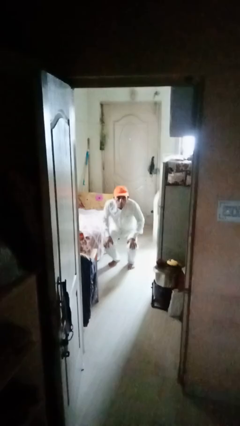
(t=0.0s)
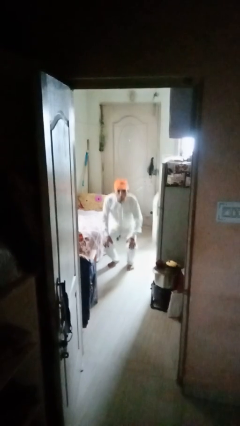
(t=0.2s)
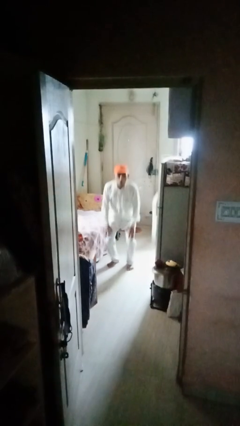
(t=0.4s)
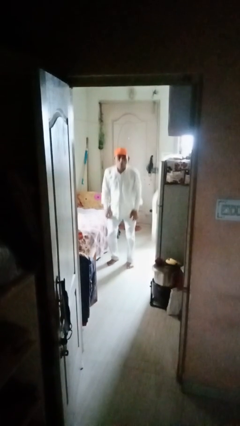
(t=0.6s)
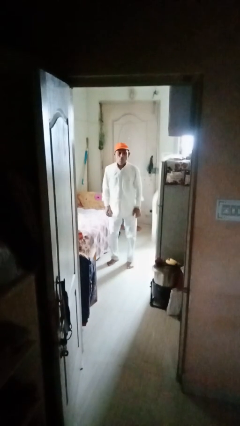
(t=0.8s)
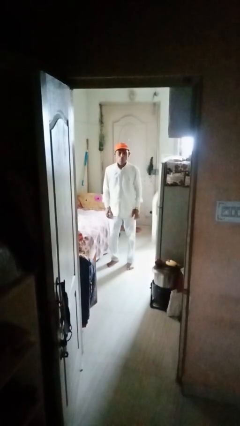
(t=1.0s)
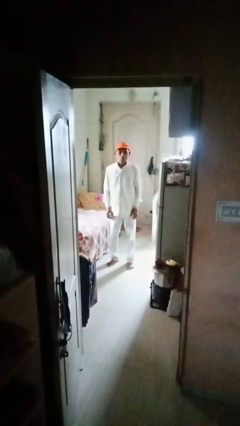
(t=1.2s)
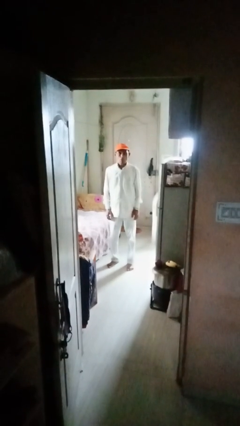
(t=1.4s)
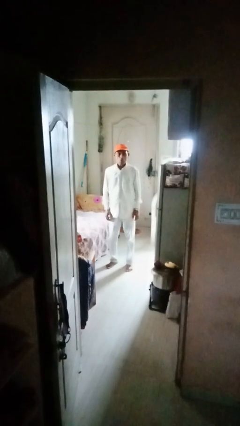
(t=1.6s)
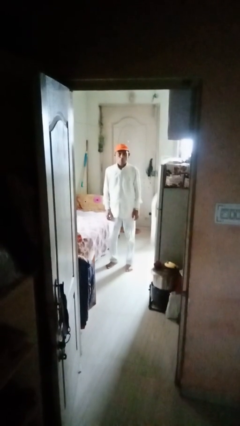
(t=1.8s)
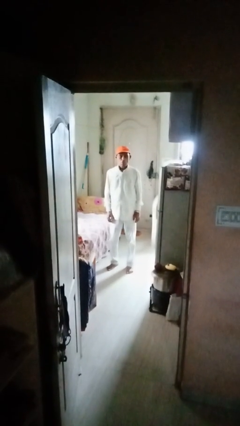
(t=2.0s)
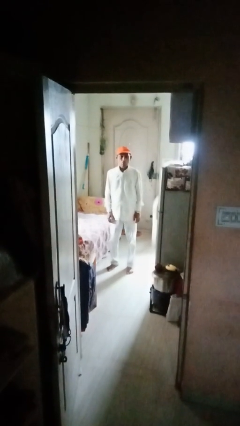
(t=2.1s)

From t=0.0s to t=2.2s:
person stands up

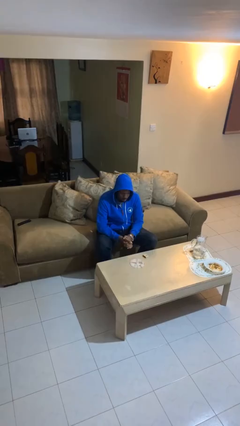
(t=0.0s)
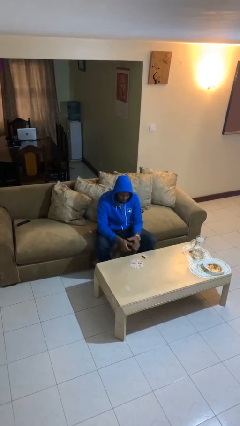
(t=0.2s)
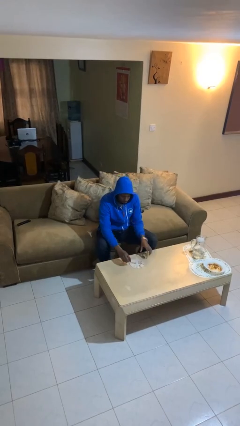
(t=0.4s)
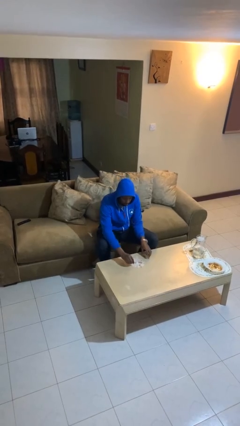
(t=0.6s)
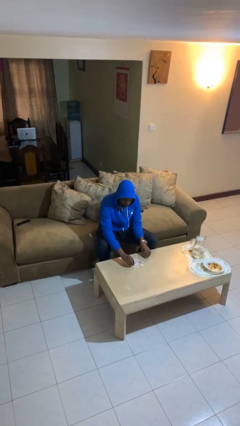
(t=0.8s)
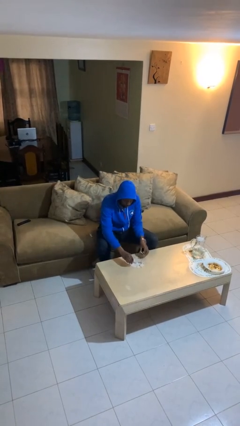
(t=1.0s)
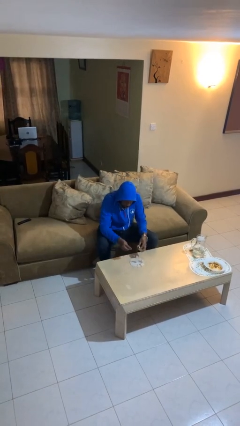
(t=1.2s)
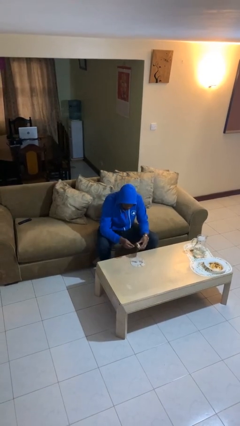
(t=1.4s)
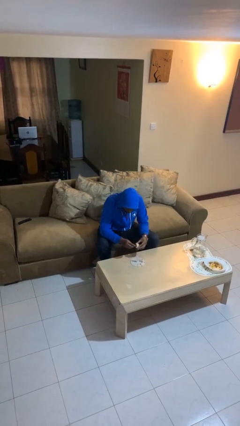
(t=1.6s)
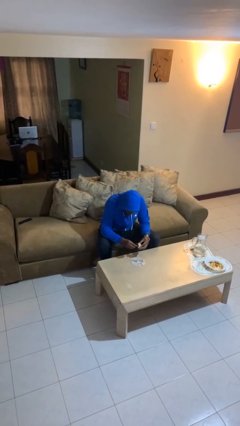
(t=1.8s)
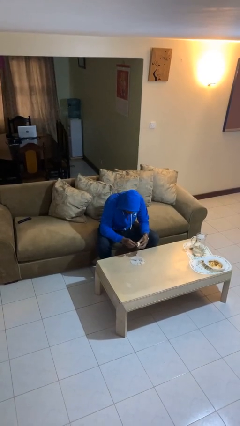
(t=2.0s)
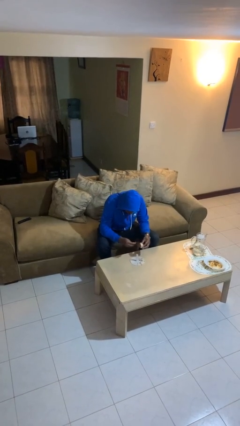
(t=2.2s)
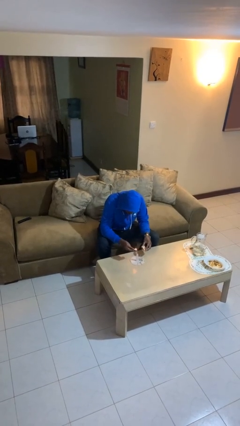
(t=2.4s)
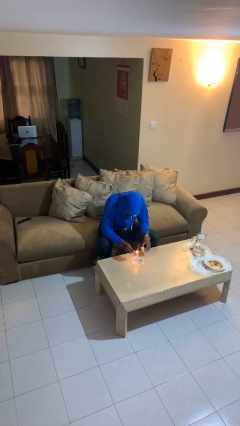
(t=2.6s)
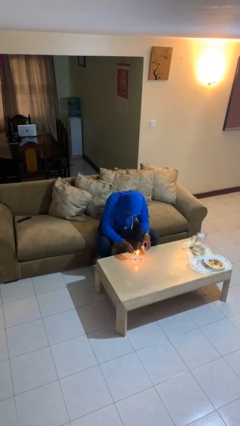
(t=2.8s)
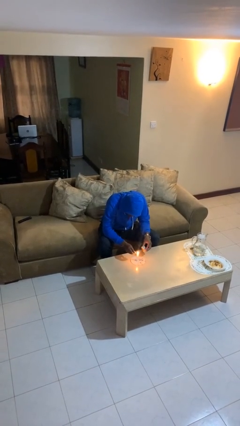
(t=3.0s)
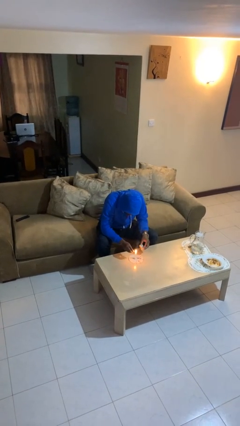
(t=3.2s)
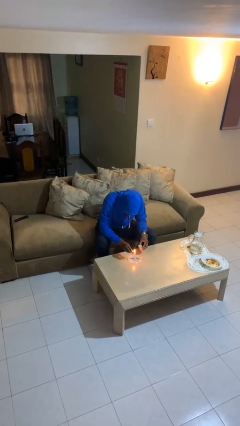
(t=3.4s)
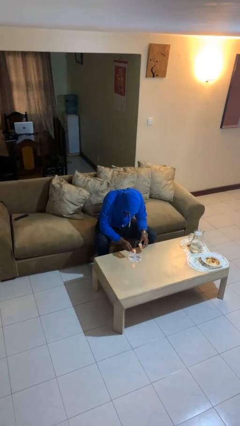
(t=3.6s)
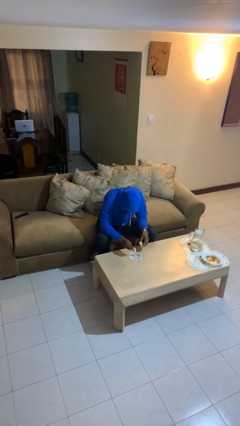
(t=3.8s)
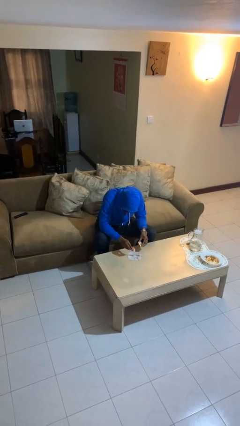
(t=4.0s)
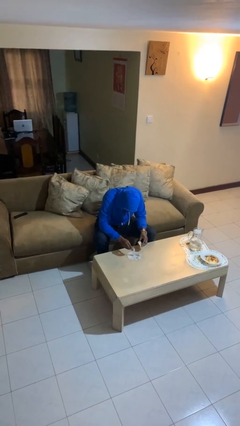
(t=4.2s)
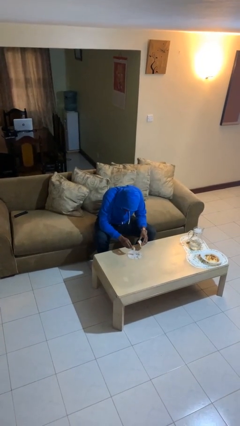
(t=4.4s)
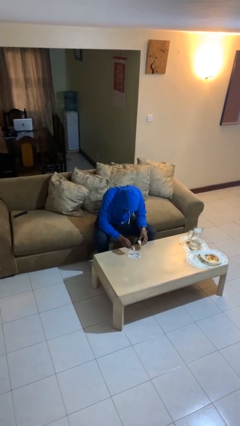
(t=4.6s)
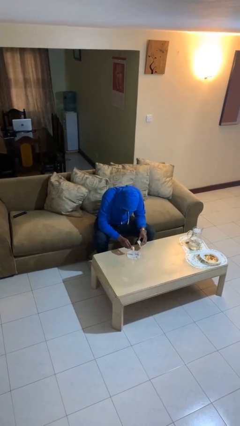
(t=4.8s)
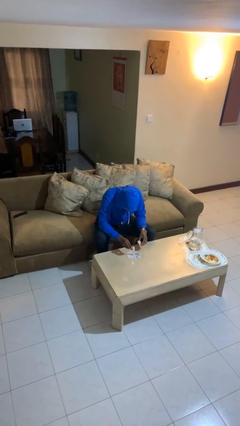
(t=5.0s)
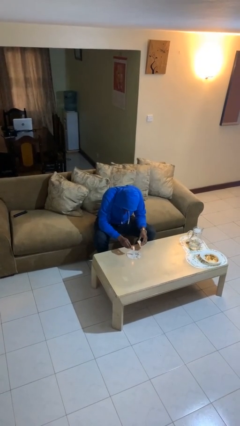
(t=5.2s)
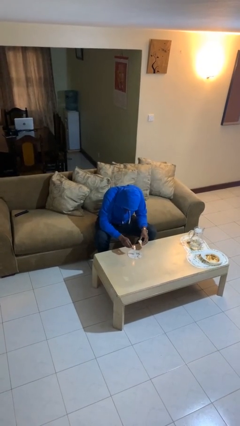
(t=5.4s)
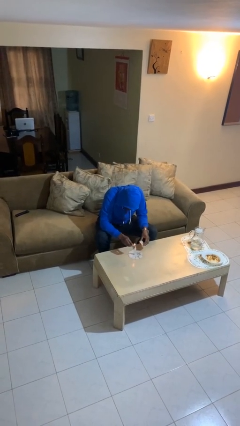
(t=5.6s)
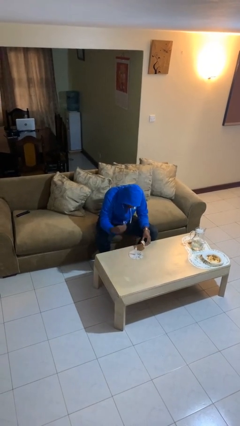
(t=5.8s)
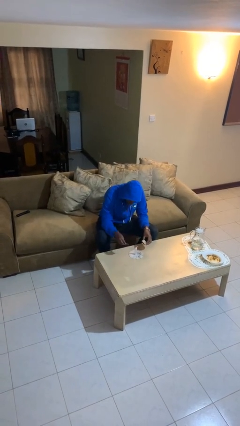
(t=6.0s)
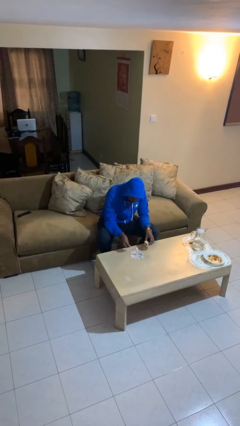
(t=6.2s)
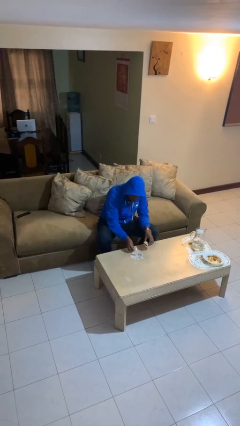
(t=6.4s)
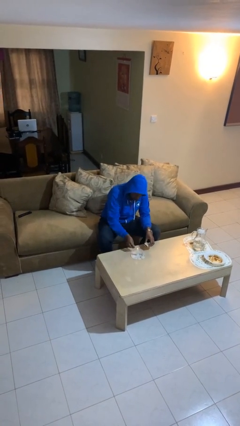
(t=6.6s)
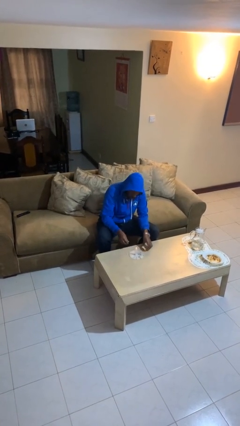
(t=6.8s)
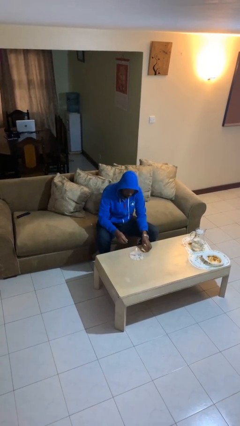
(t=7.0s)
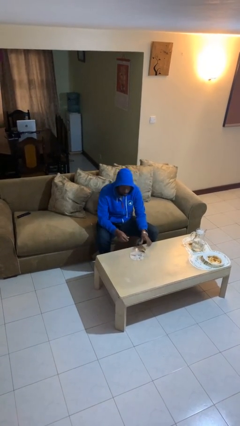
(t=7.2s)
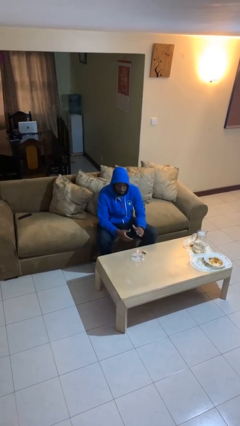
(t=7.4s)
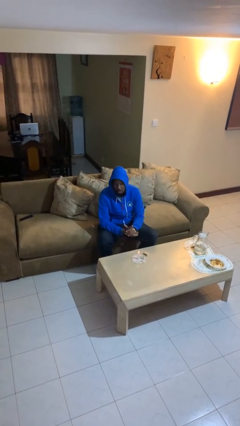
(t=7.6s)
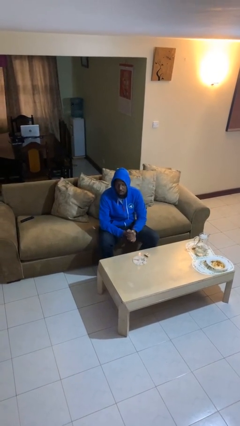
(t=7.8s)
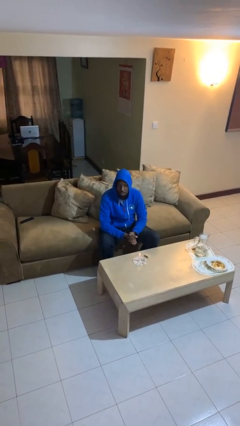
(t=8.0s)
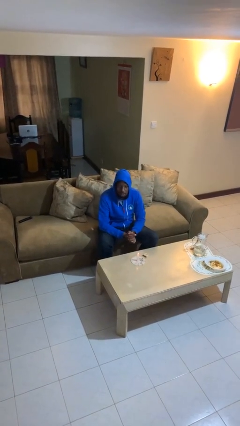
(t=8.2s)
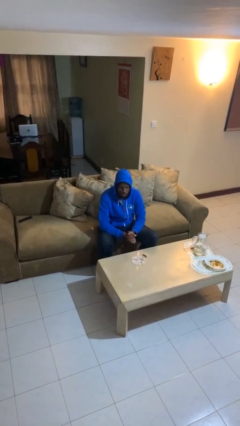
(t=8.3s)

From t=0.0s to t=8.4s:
person lights candle

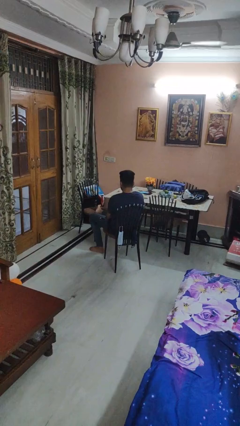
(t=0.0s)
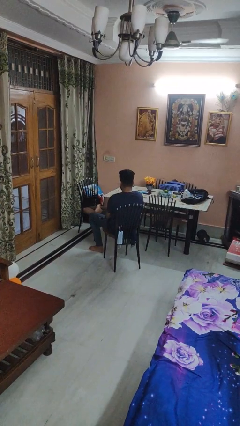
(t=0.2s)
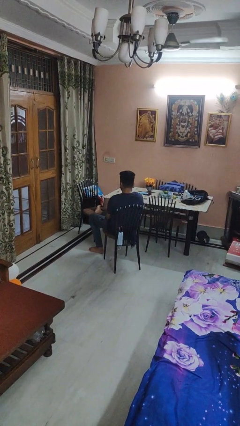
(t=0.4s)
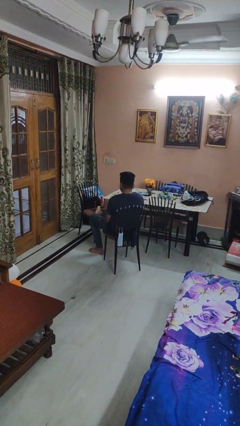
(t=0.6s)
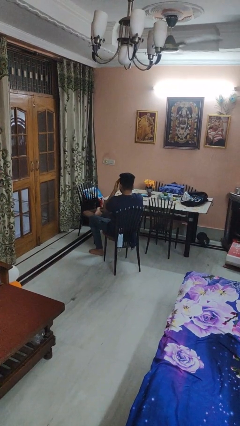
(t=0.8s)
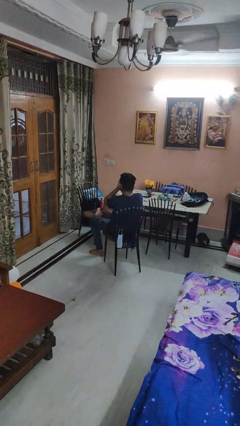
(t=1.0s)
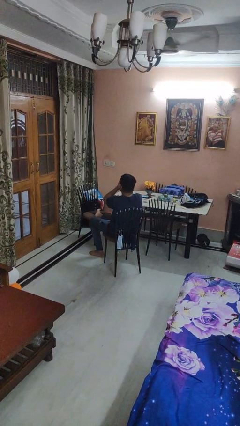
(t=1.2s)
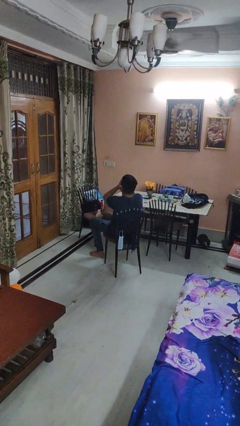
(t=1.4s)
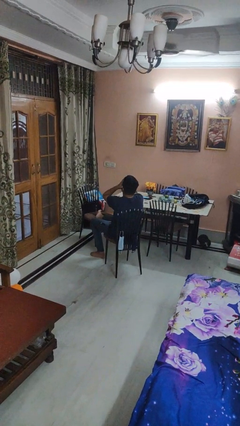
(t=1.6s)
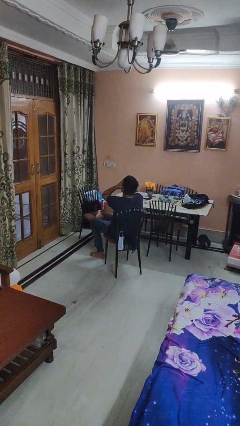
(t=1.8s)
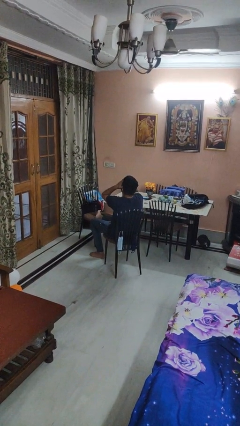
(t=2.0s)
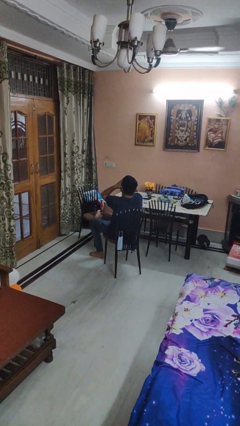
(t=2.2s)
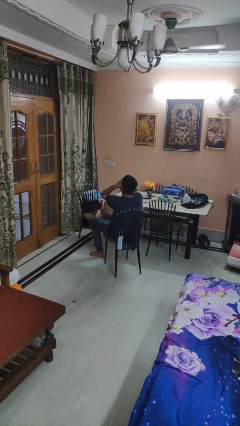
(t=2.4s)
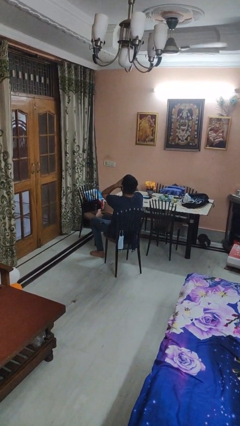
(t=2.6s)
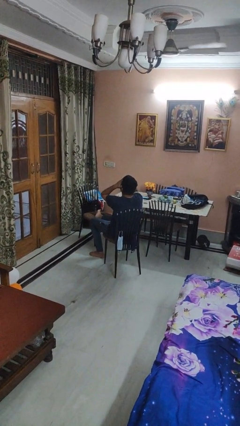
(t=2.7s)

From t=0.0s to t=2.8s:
person covers face with hands

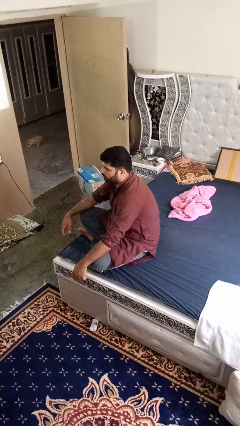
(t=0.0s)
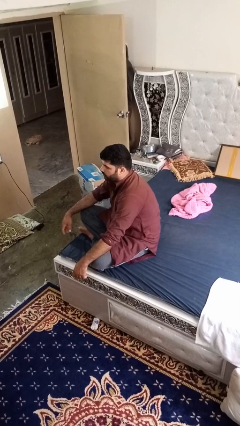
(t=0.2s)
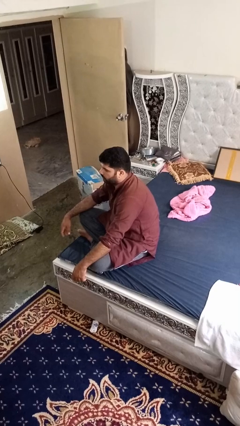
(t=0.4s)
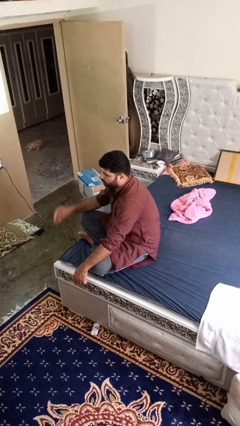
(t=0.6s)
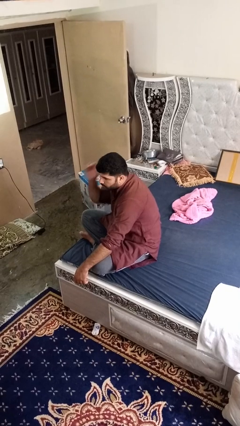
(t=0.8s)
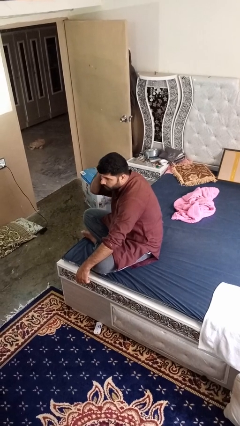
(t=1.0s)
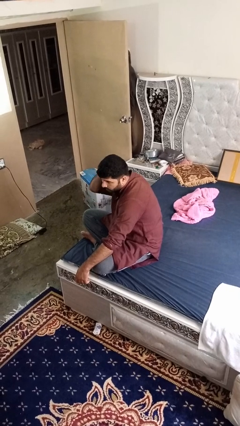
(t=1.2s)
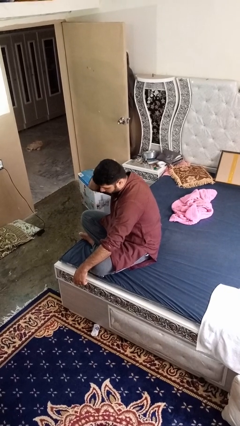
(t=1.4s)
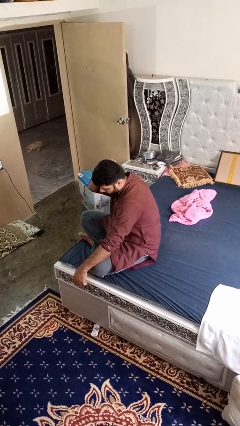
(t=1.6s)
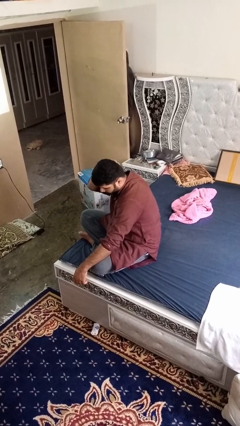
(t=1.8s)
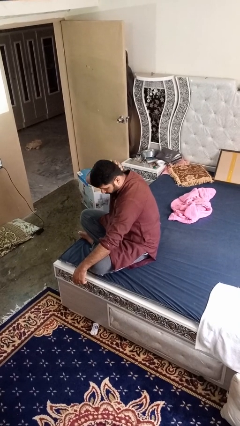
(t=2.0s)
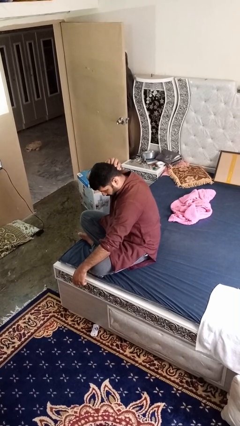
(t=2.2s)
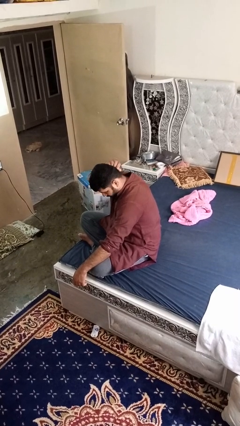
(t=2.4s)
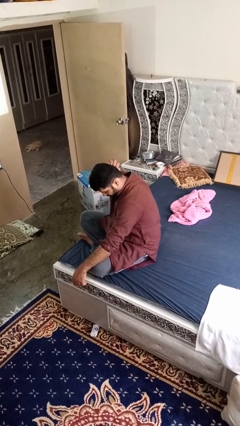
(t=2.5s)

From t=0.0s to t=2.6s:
person strokes hair

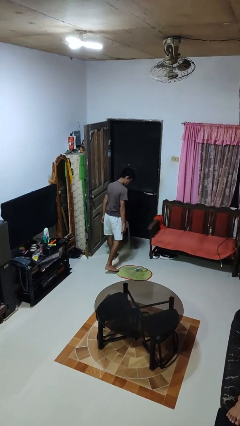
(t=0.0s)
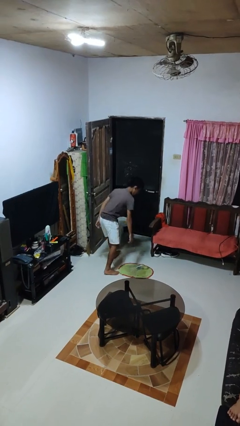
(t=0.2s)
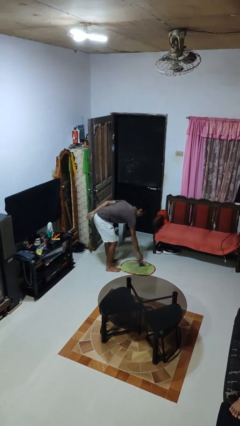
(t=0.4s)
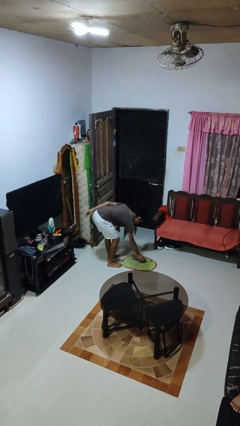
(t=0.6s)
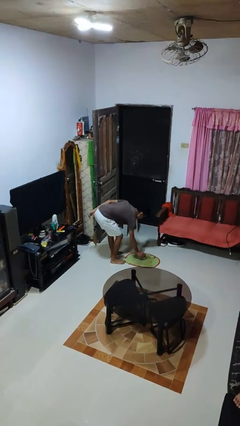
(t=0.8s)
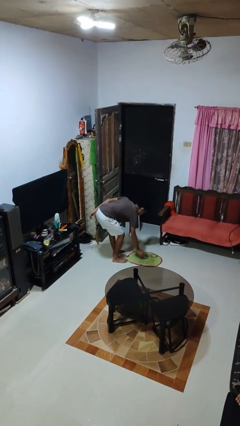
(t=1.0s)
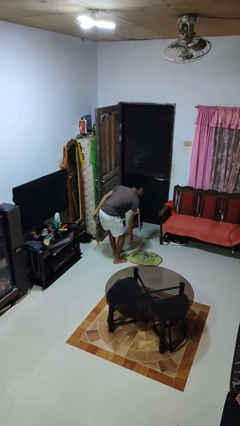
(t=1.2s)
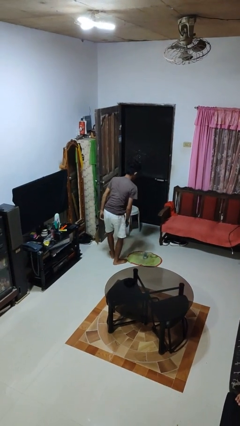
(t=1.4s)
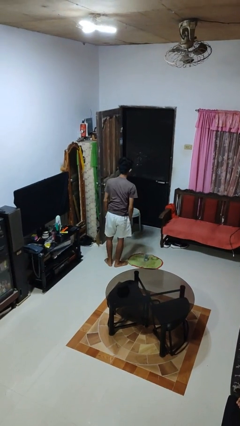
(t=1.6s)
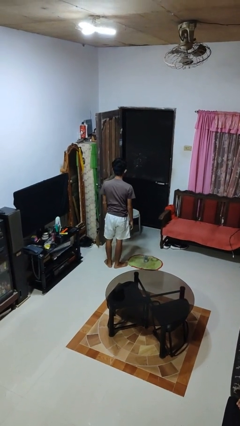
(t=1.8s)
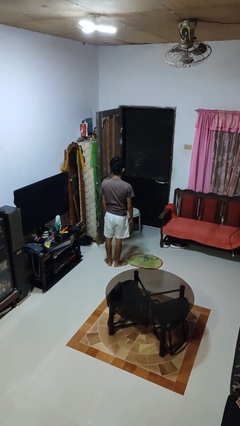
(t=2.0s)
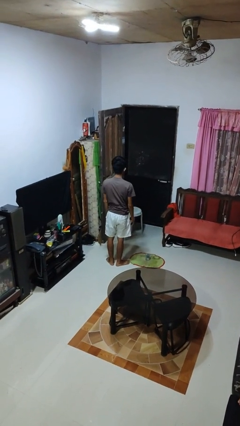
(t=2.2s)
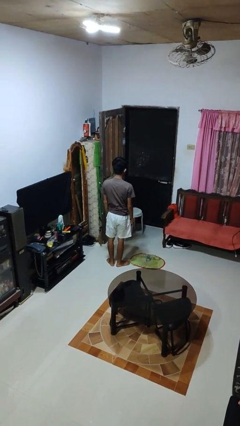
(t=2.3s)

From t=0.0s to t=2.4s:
person sets upright glass
